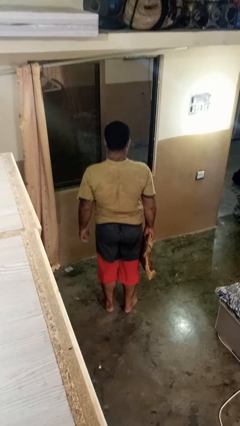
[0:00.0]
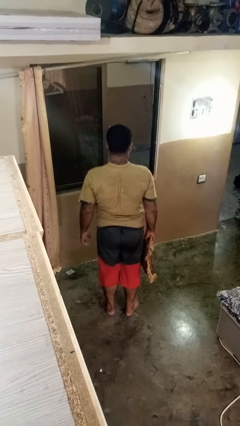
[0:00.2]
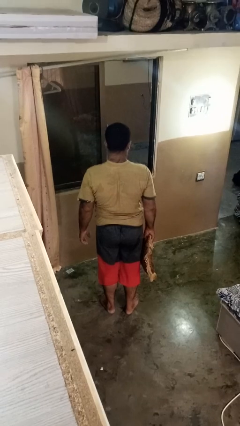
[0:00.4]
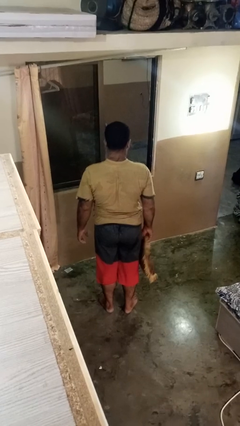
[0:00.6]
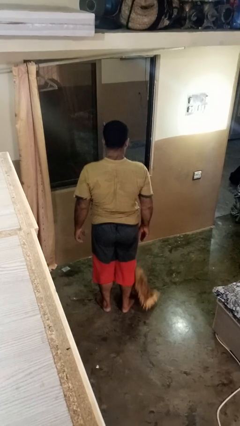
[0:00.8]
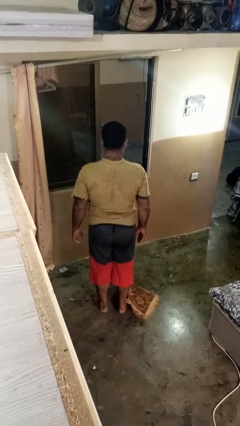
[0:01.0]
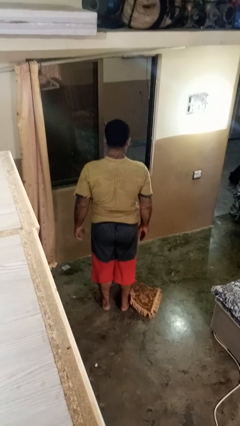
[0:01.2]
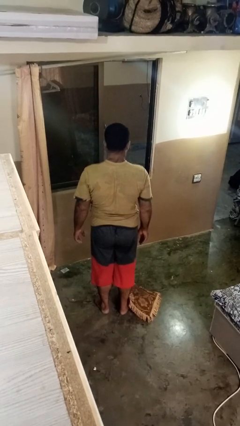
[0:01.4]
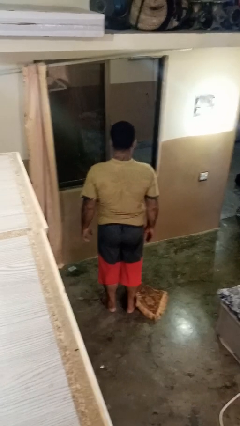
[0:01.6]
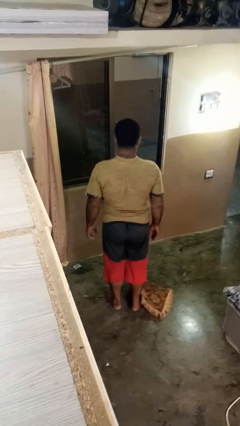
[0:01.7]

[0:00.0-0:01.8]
person drops object

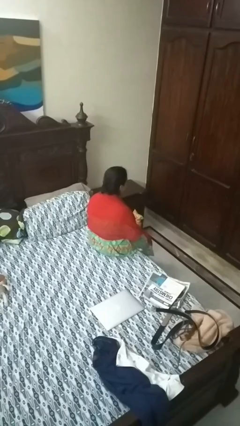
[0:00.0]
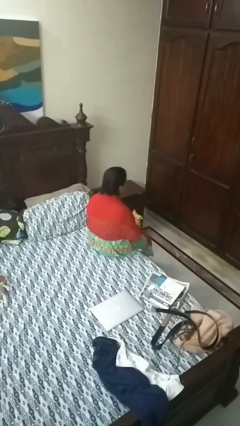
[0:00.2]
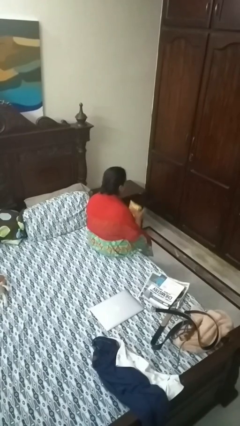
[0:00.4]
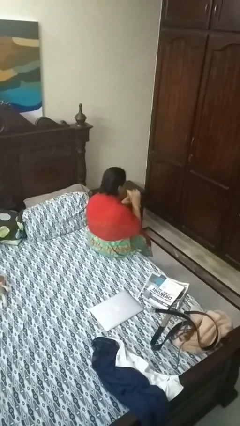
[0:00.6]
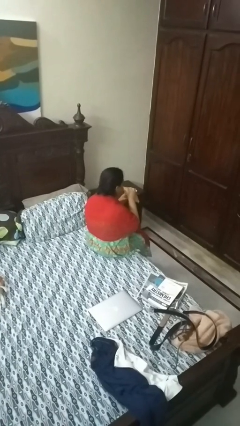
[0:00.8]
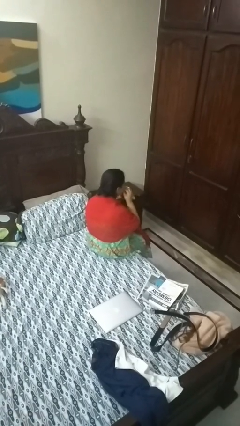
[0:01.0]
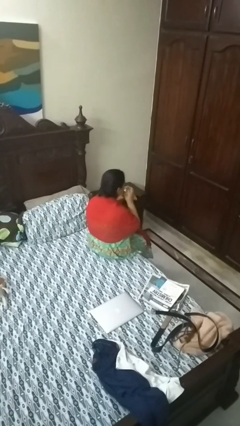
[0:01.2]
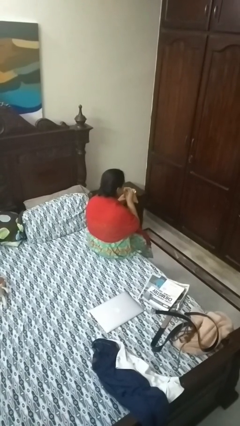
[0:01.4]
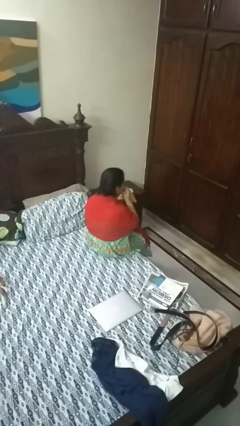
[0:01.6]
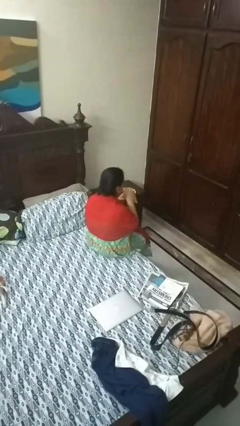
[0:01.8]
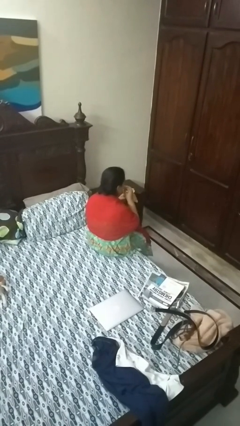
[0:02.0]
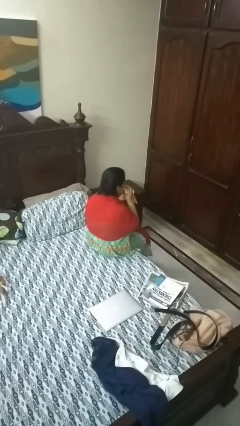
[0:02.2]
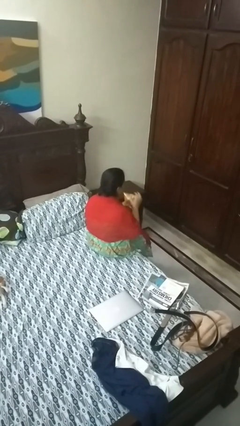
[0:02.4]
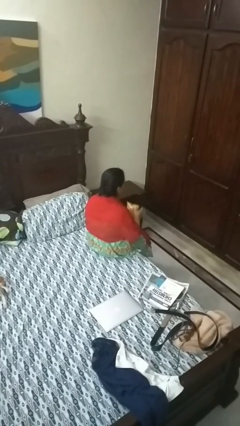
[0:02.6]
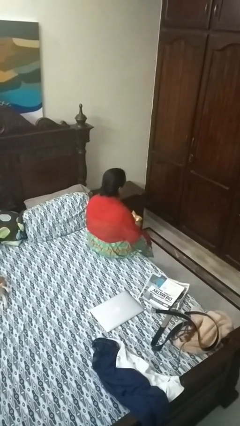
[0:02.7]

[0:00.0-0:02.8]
person eats snack from bag

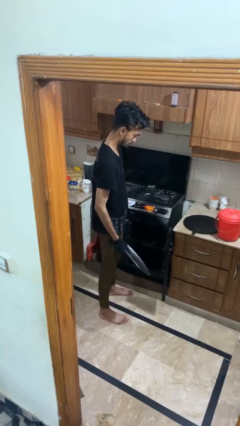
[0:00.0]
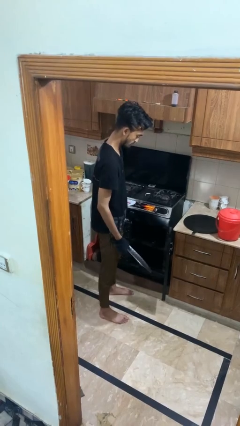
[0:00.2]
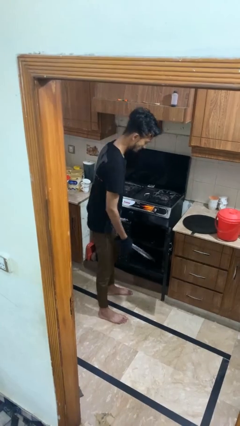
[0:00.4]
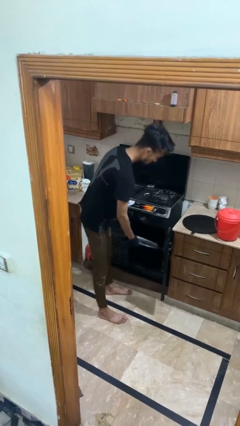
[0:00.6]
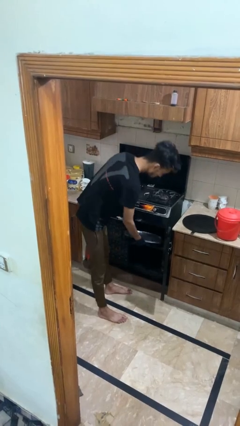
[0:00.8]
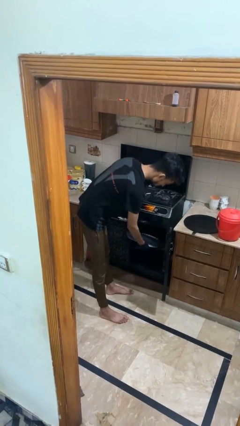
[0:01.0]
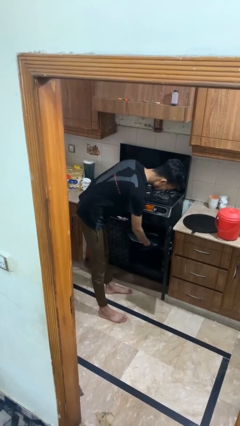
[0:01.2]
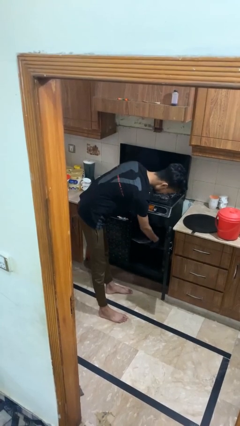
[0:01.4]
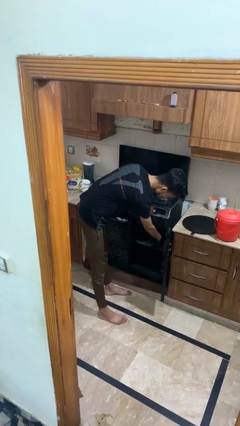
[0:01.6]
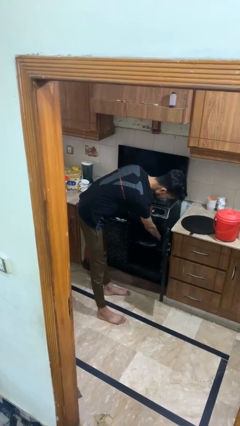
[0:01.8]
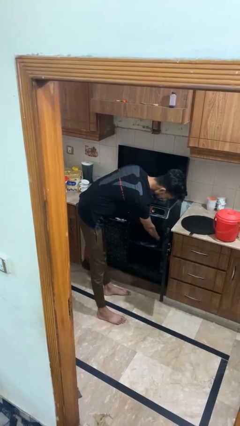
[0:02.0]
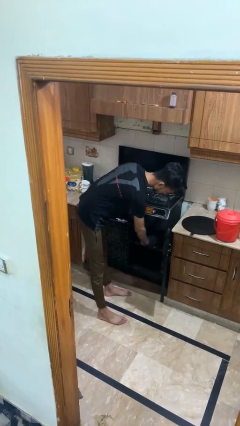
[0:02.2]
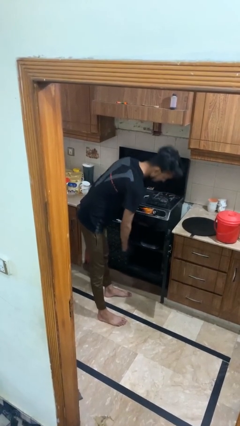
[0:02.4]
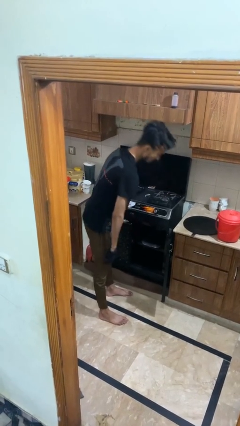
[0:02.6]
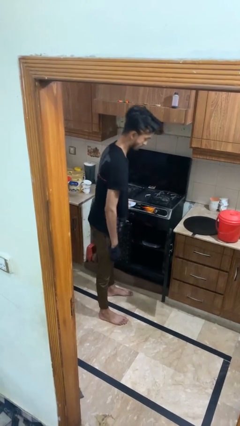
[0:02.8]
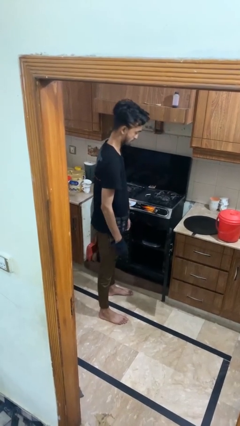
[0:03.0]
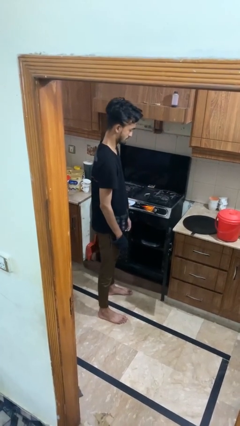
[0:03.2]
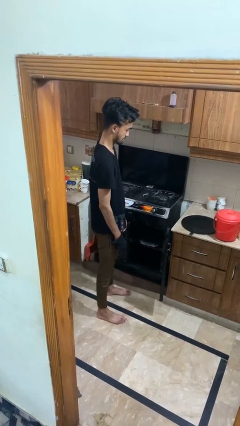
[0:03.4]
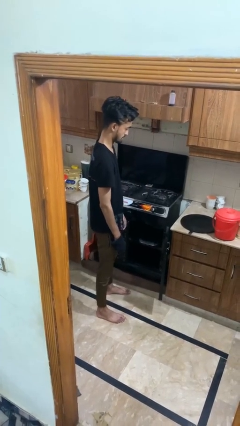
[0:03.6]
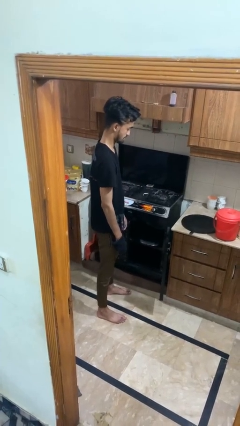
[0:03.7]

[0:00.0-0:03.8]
person puts object into oven

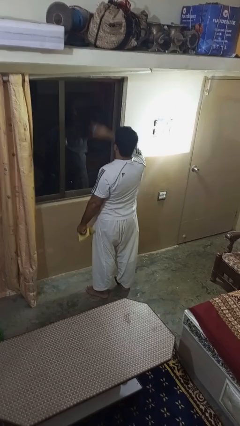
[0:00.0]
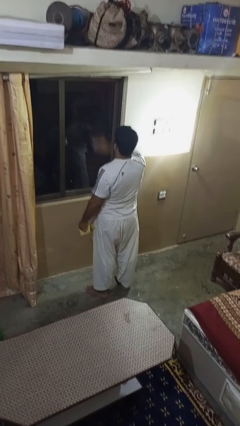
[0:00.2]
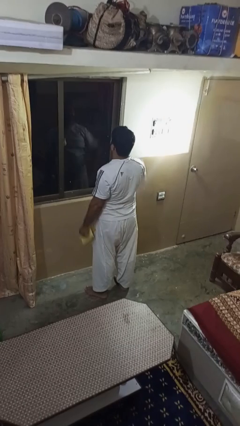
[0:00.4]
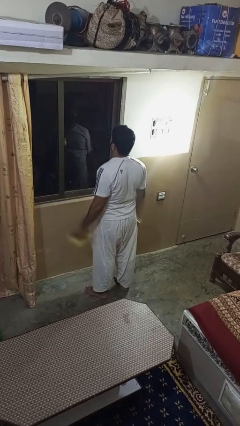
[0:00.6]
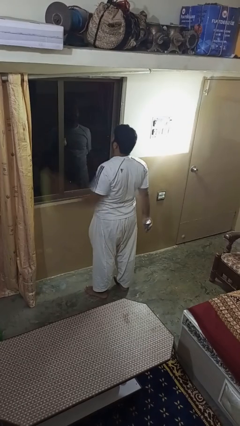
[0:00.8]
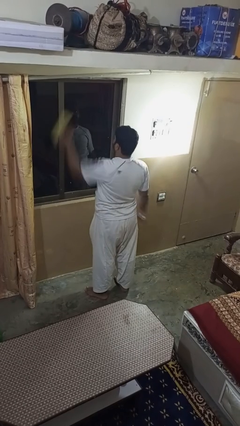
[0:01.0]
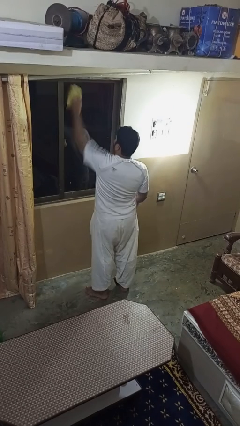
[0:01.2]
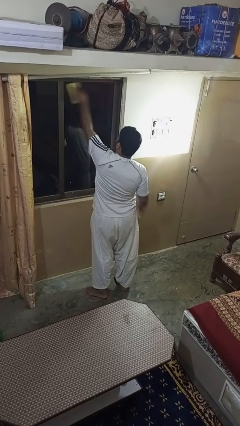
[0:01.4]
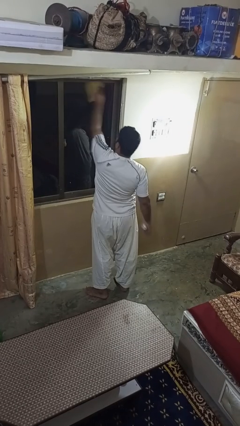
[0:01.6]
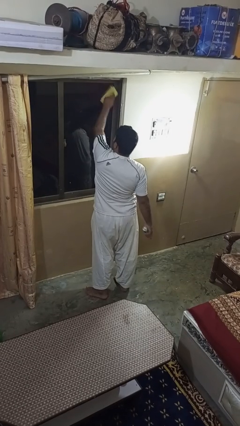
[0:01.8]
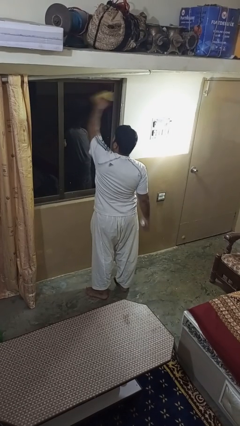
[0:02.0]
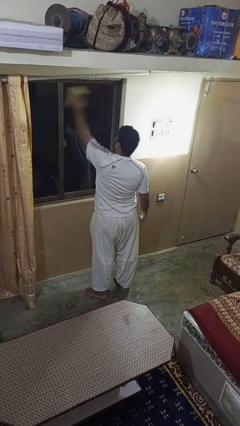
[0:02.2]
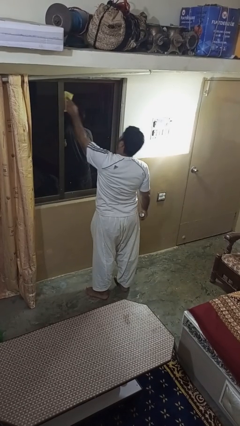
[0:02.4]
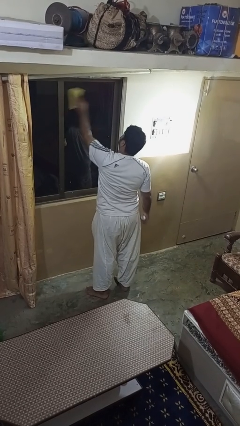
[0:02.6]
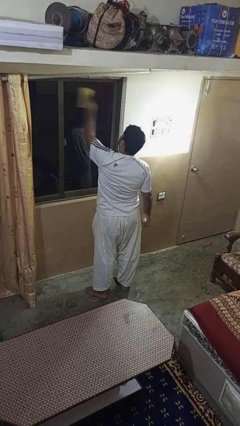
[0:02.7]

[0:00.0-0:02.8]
person washes window

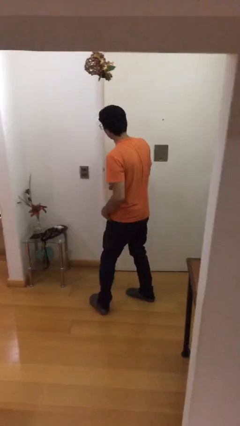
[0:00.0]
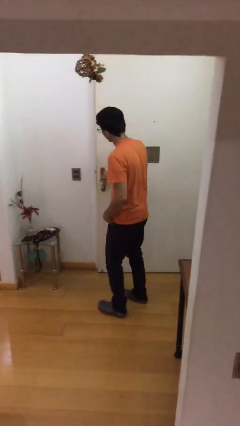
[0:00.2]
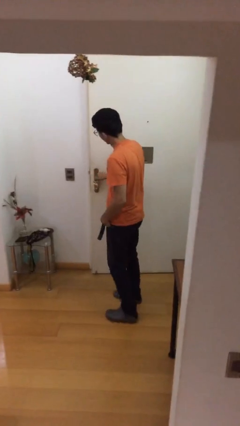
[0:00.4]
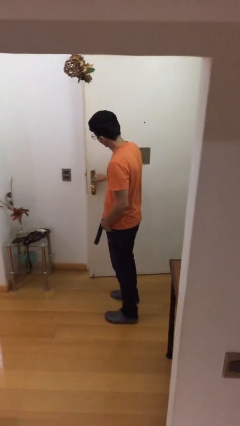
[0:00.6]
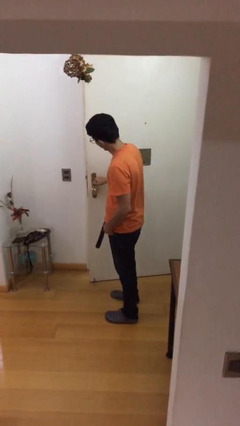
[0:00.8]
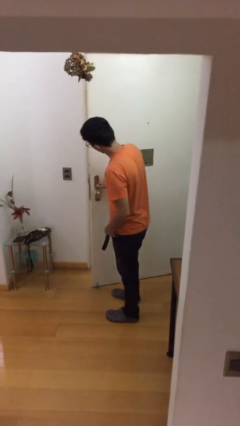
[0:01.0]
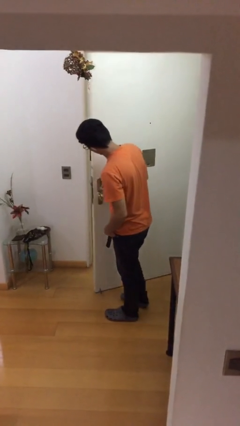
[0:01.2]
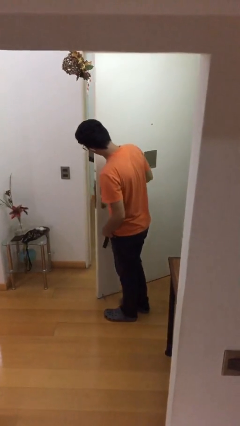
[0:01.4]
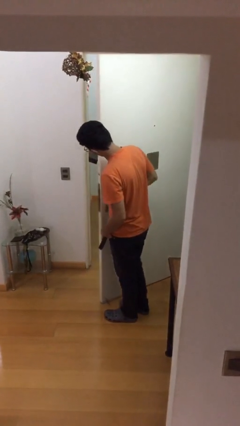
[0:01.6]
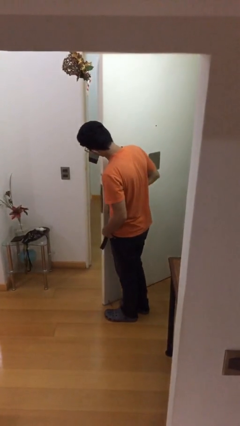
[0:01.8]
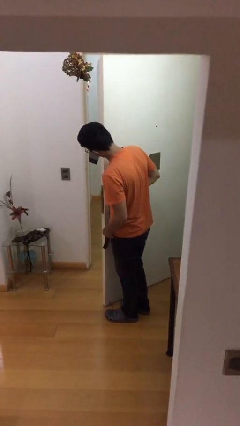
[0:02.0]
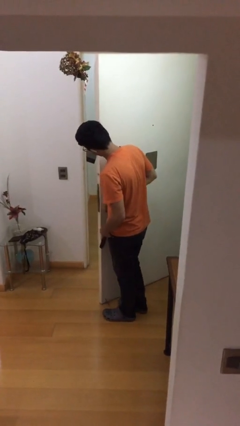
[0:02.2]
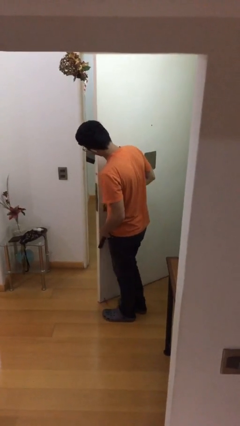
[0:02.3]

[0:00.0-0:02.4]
person opens facility door

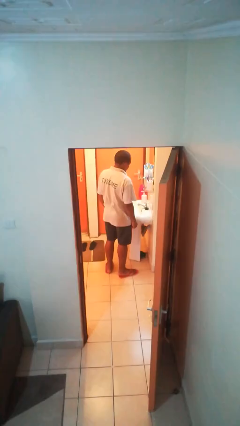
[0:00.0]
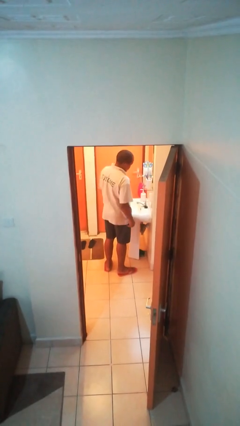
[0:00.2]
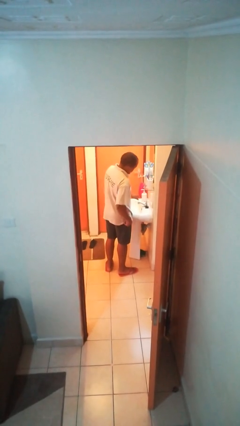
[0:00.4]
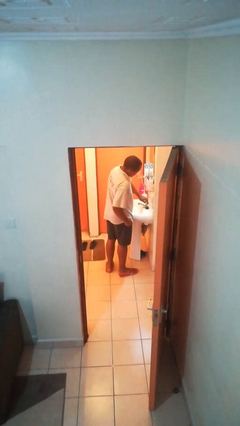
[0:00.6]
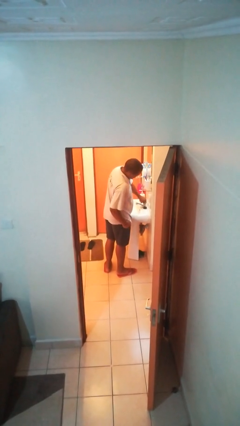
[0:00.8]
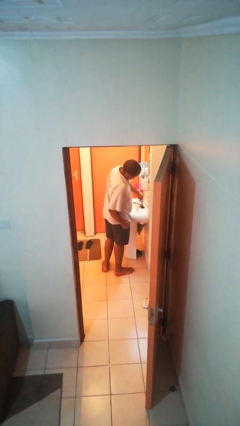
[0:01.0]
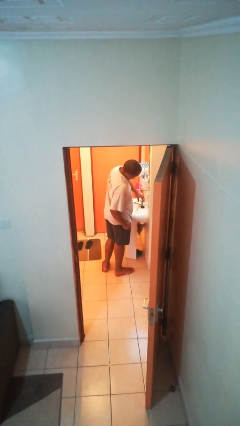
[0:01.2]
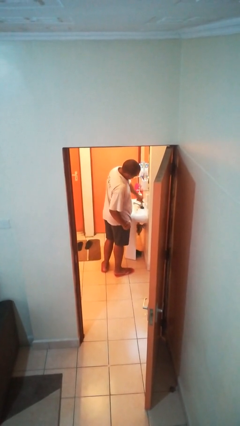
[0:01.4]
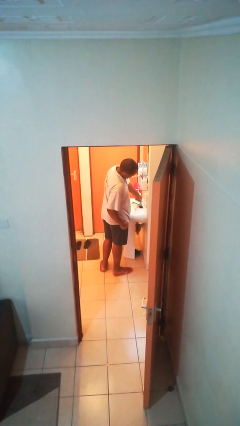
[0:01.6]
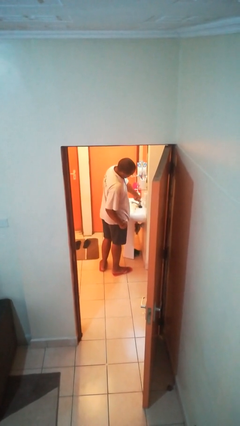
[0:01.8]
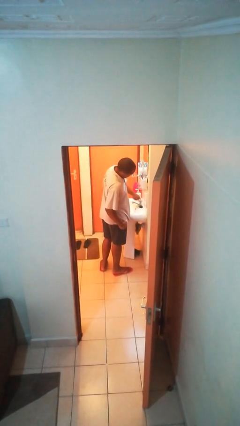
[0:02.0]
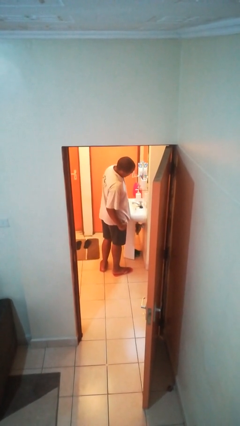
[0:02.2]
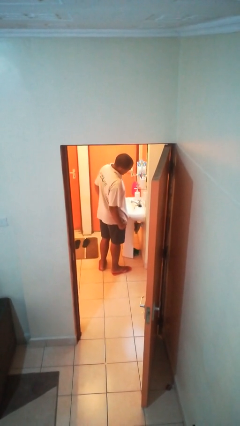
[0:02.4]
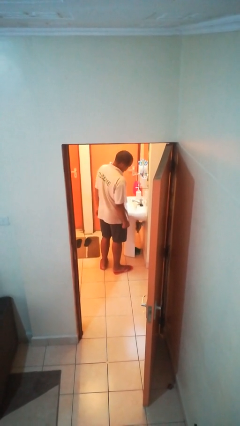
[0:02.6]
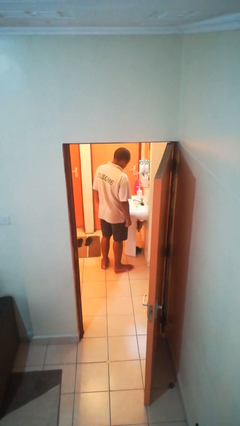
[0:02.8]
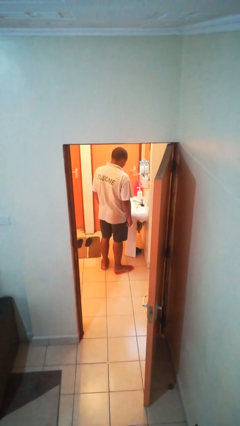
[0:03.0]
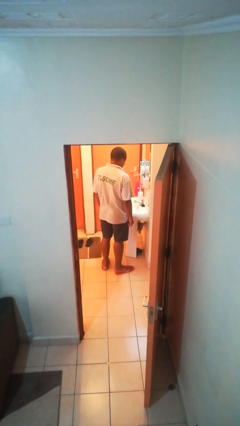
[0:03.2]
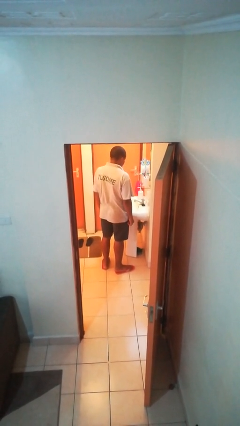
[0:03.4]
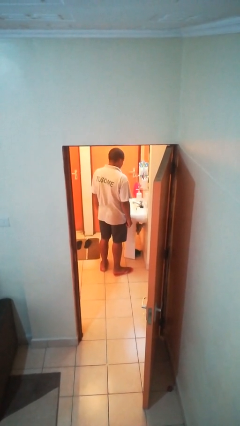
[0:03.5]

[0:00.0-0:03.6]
person turns on faucet
